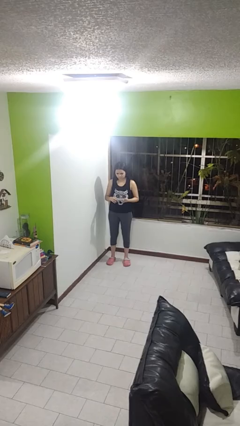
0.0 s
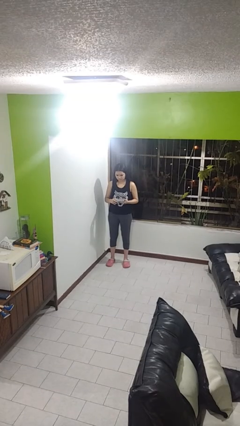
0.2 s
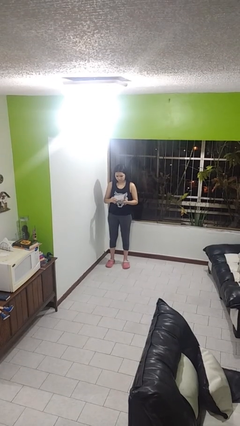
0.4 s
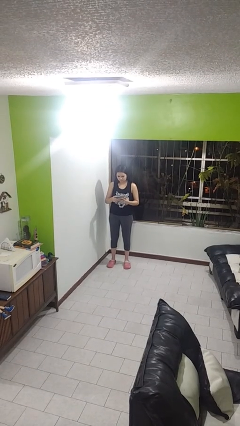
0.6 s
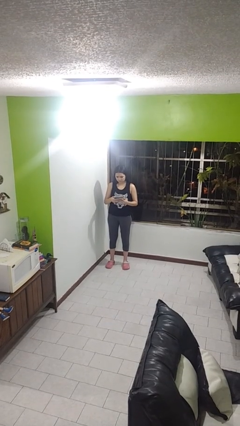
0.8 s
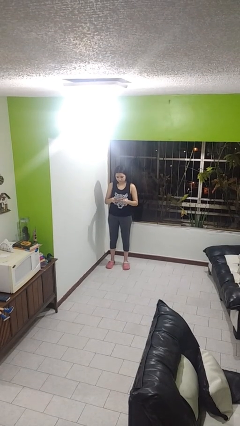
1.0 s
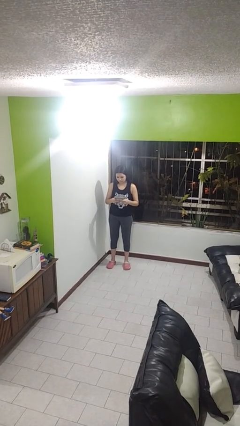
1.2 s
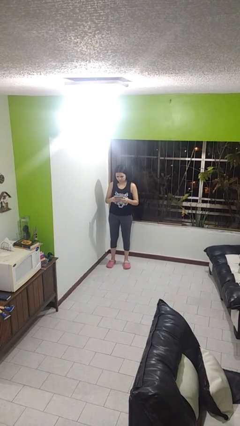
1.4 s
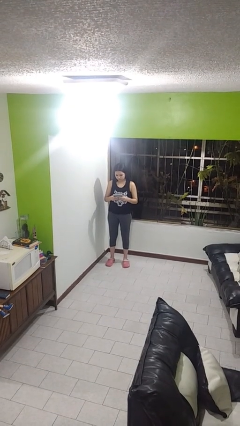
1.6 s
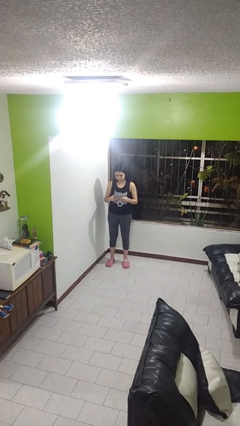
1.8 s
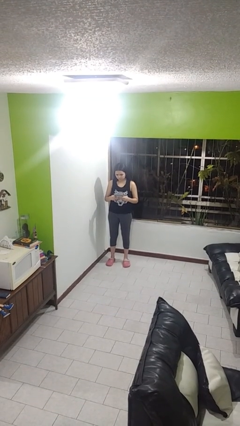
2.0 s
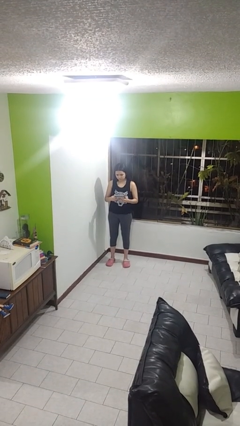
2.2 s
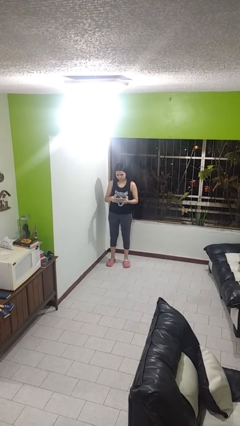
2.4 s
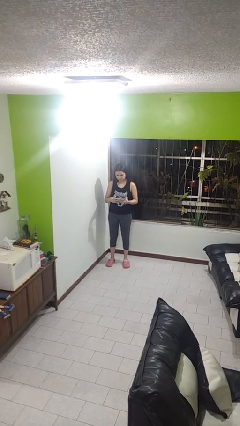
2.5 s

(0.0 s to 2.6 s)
person interacts with handheld game

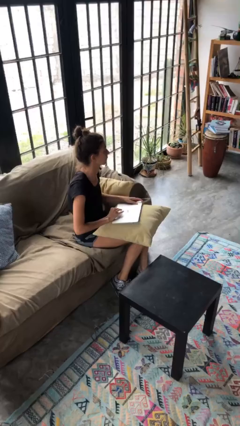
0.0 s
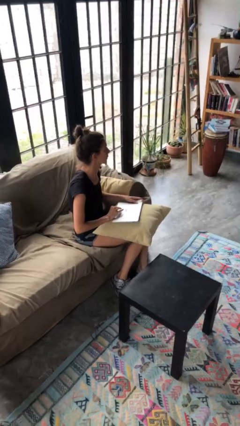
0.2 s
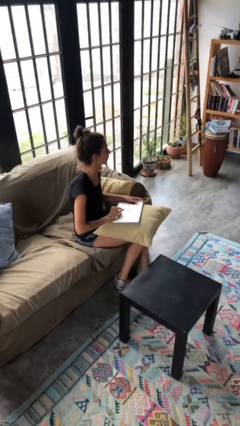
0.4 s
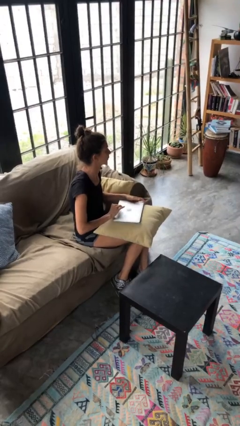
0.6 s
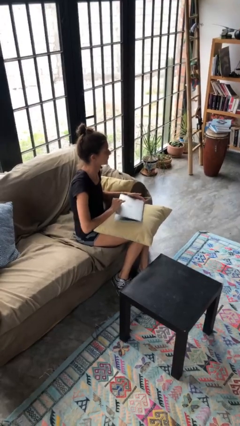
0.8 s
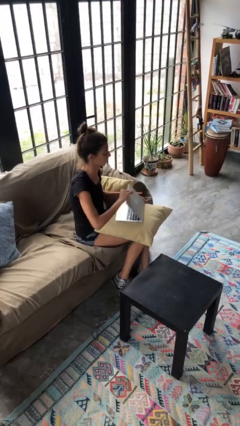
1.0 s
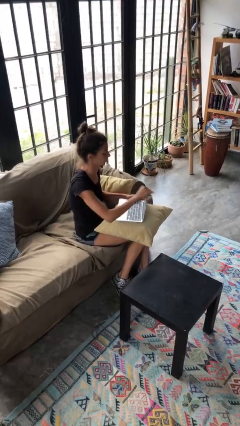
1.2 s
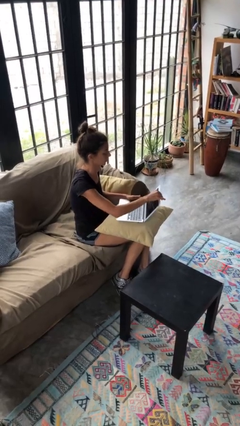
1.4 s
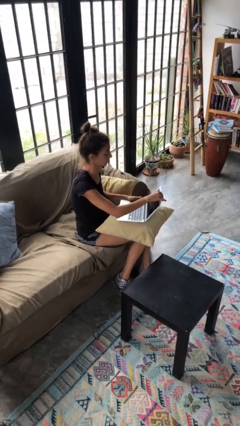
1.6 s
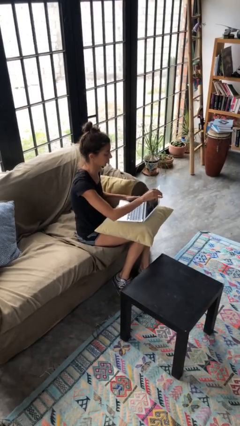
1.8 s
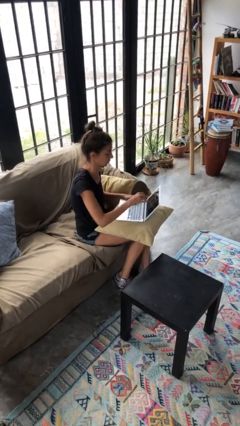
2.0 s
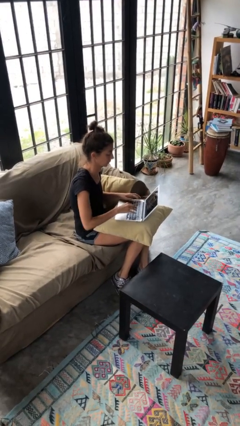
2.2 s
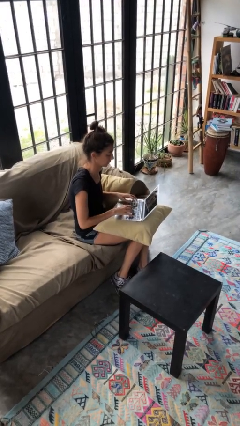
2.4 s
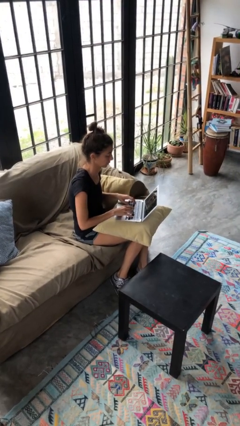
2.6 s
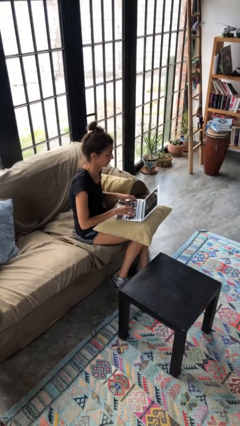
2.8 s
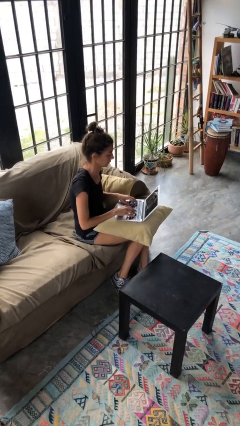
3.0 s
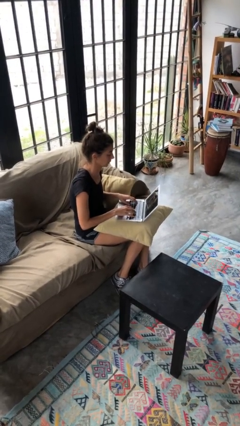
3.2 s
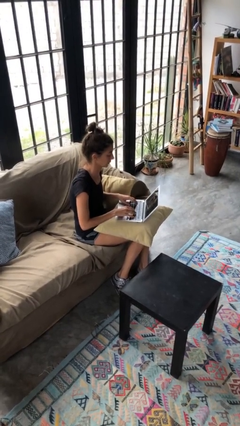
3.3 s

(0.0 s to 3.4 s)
person opens laptop

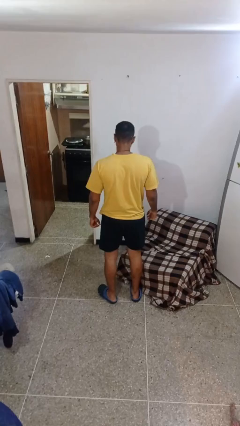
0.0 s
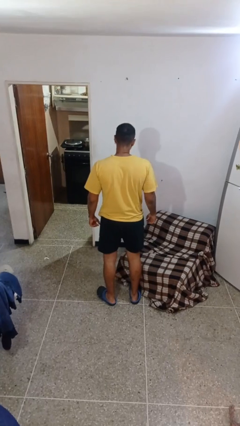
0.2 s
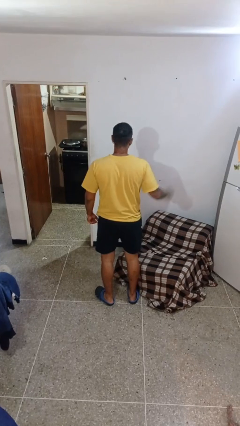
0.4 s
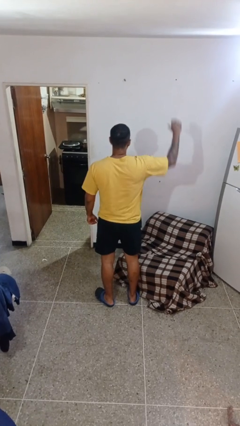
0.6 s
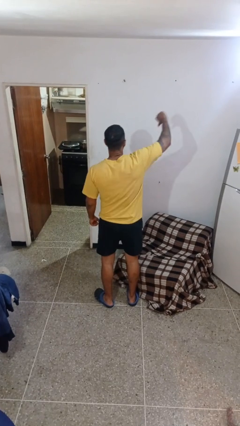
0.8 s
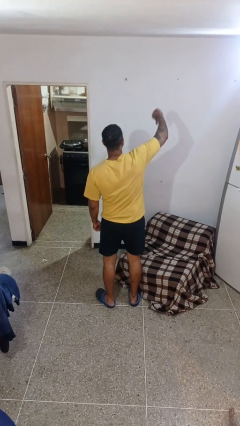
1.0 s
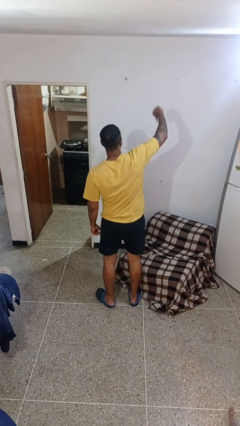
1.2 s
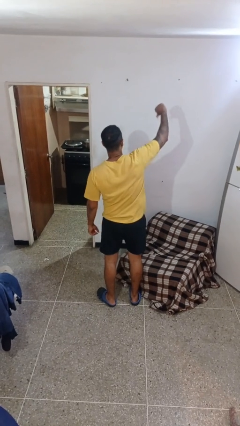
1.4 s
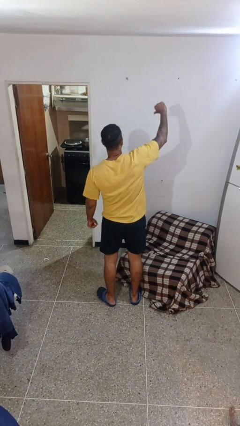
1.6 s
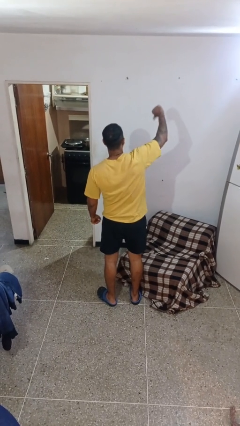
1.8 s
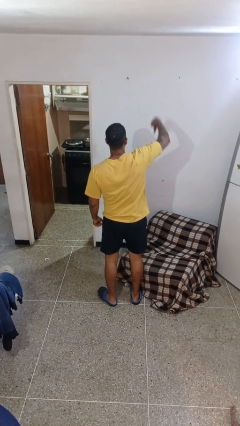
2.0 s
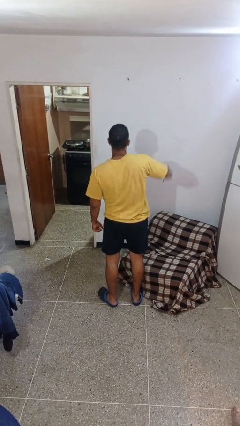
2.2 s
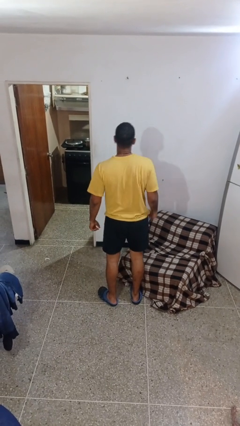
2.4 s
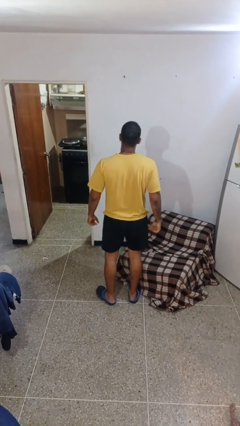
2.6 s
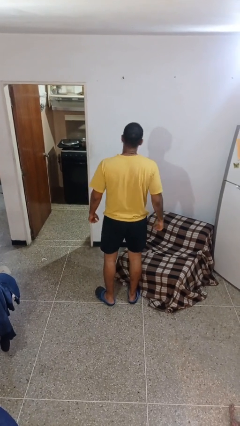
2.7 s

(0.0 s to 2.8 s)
person gestures thumbs down

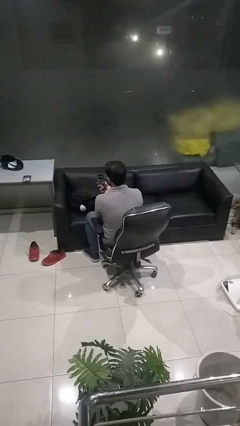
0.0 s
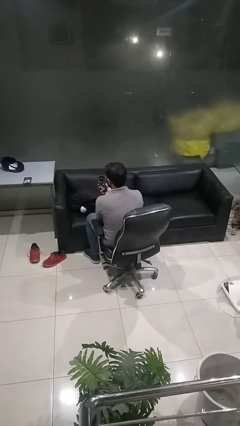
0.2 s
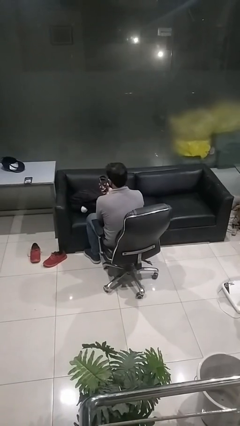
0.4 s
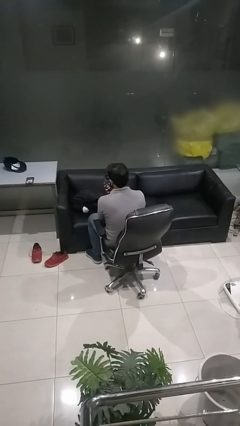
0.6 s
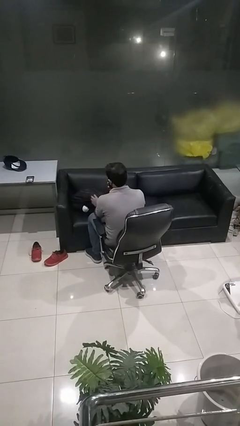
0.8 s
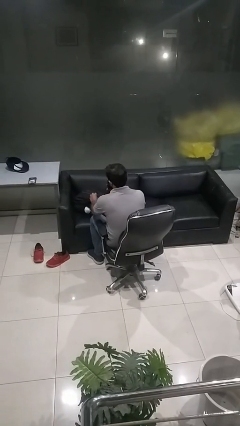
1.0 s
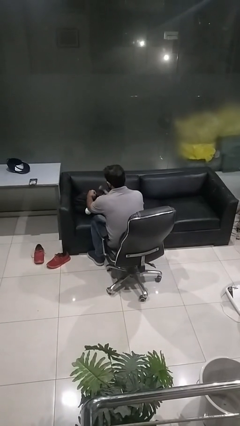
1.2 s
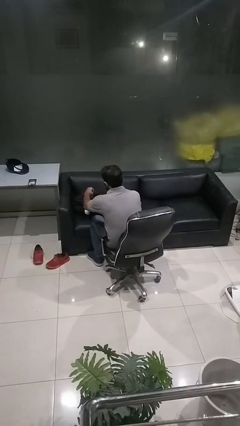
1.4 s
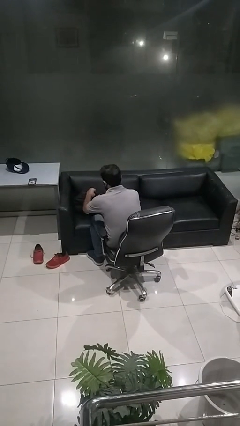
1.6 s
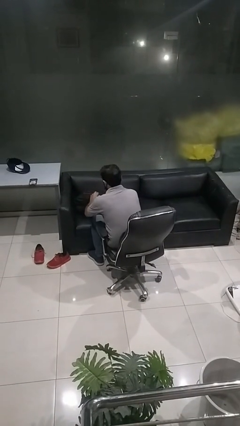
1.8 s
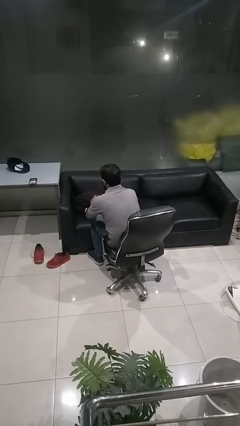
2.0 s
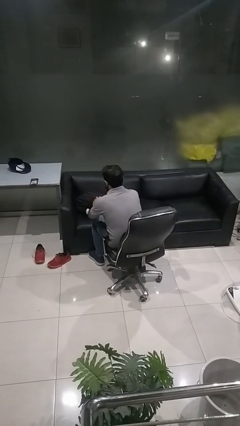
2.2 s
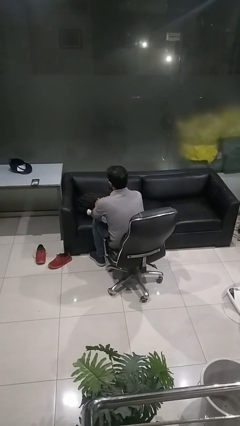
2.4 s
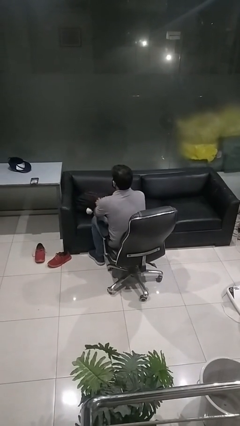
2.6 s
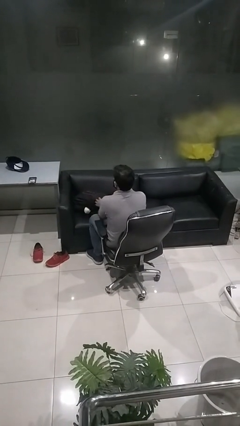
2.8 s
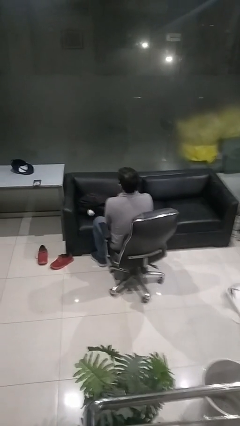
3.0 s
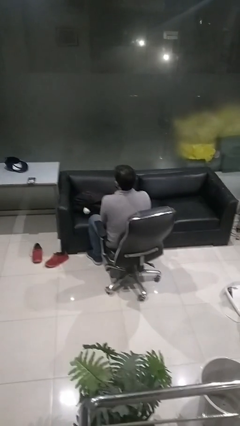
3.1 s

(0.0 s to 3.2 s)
person puts object into backpack

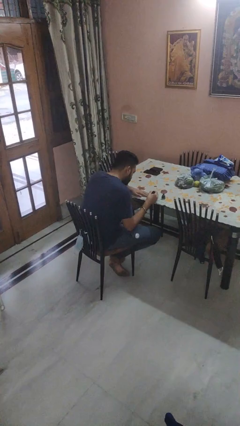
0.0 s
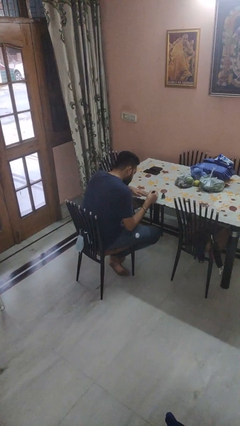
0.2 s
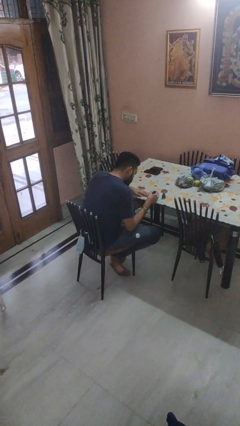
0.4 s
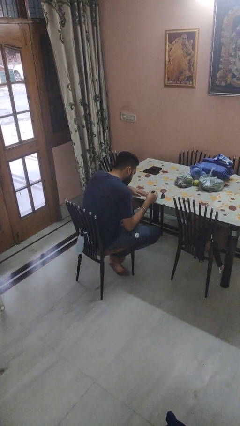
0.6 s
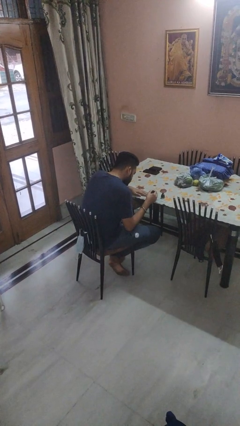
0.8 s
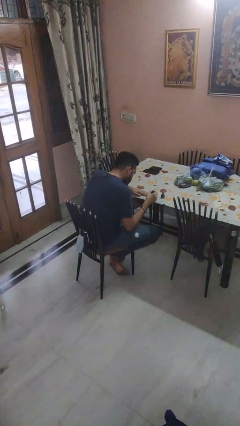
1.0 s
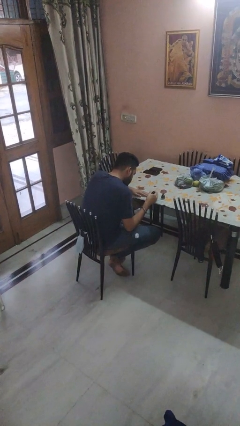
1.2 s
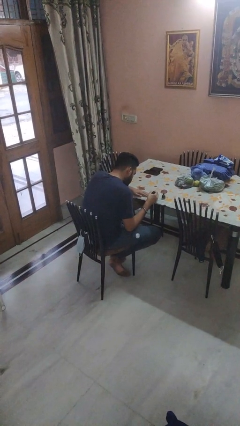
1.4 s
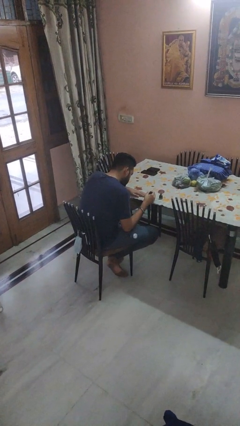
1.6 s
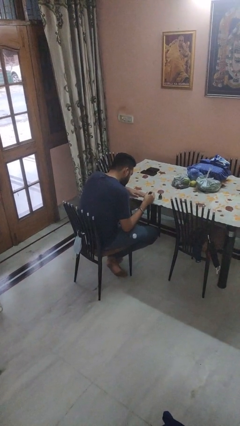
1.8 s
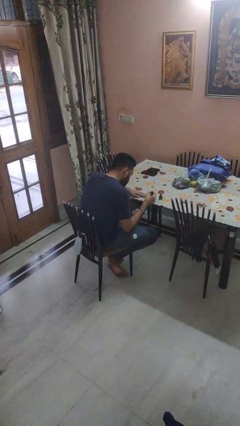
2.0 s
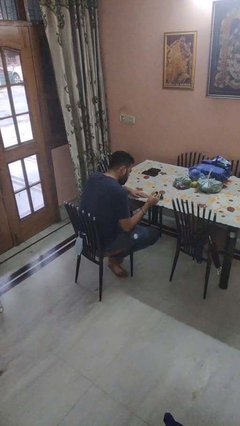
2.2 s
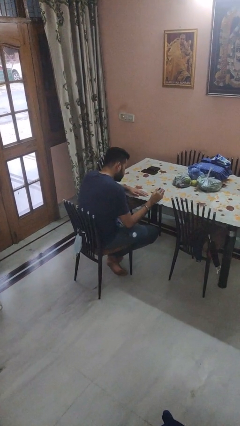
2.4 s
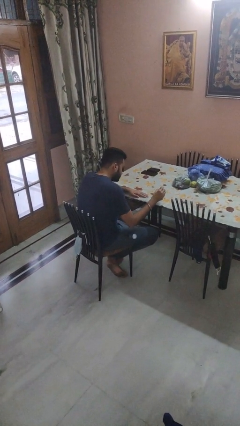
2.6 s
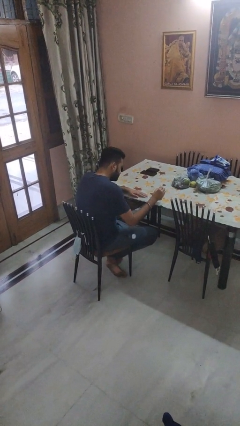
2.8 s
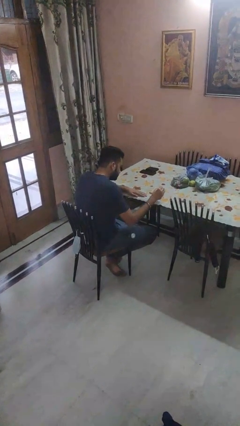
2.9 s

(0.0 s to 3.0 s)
person paints fingernails

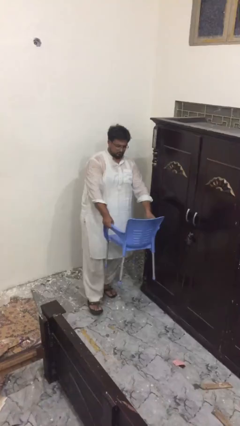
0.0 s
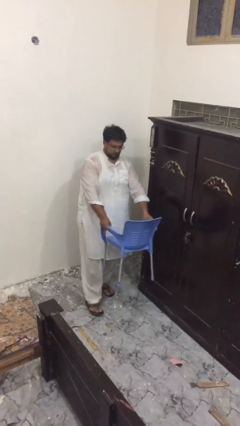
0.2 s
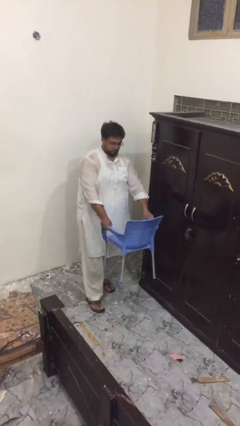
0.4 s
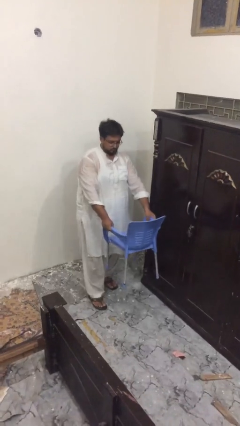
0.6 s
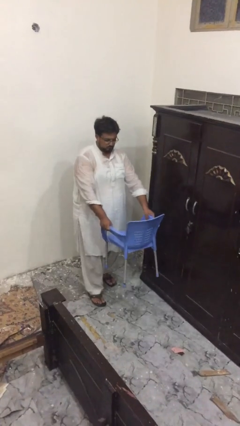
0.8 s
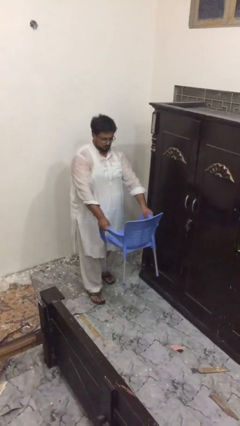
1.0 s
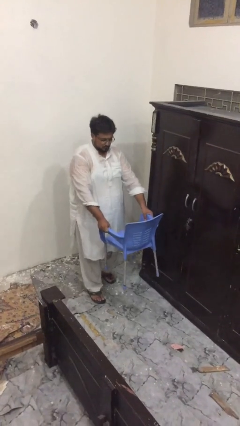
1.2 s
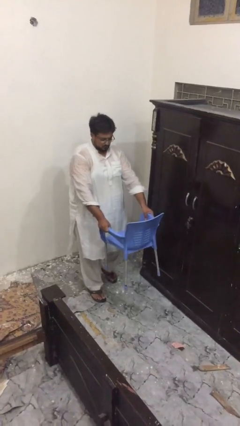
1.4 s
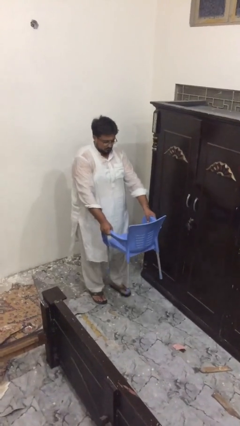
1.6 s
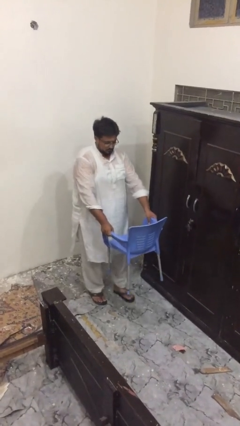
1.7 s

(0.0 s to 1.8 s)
person puts down object on floor

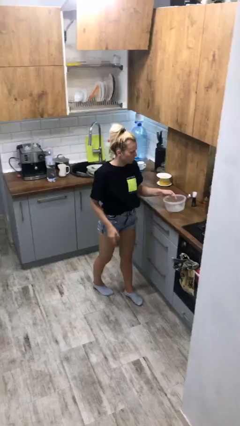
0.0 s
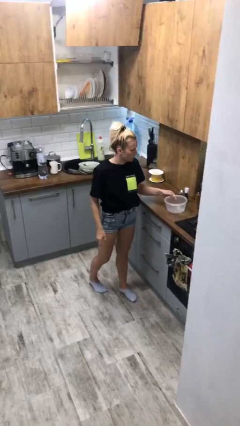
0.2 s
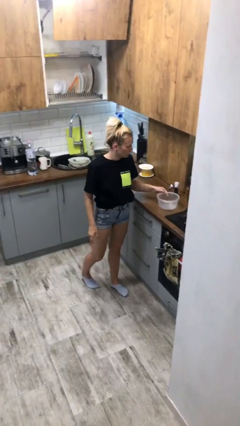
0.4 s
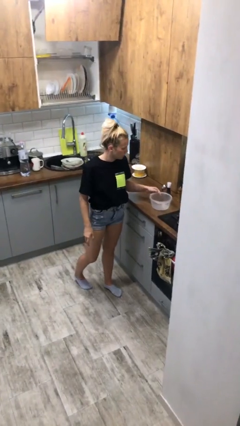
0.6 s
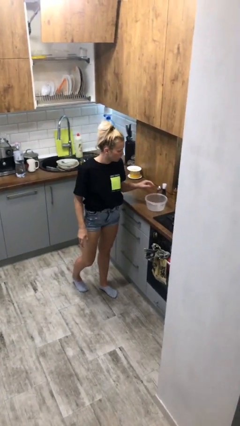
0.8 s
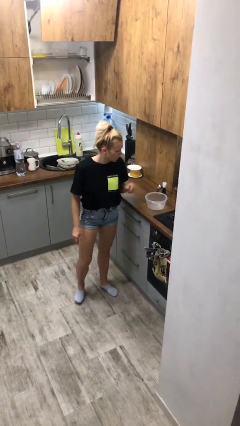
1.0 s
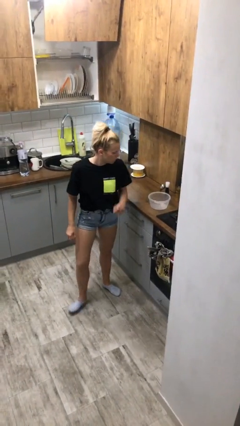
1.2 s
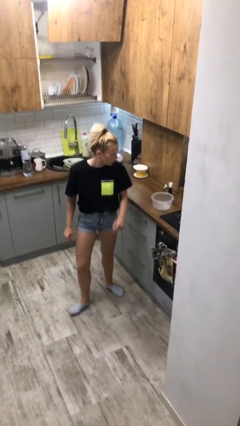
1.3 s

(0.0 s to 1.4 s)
person puts down object on table
